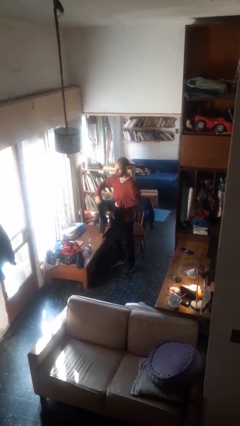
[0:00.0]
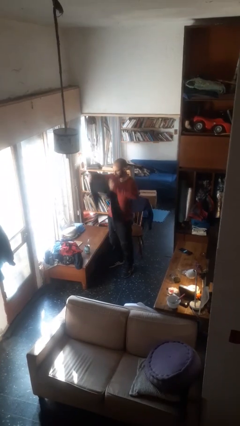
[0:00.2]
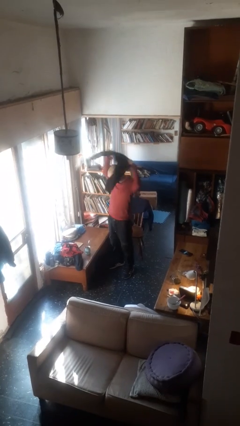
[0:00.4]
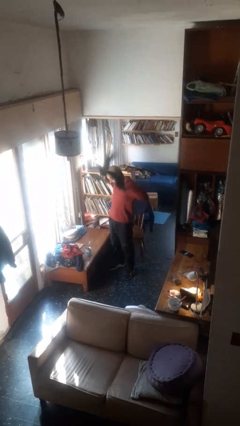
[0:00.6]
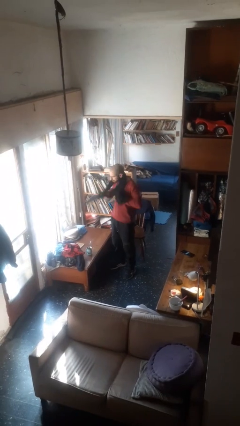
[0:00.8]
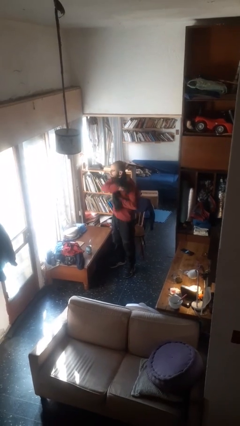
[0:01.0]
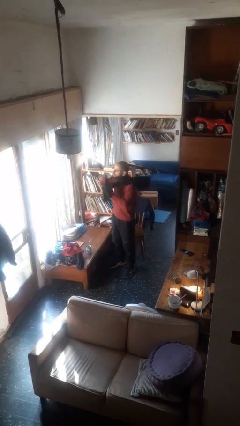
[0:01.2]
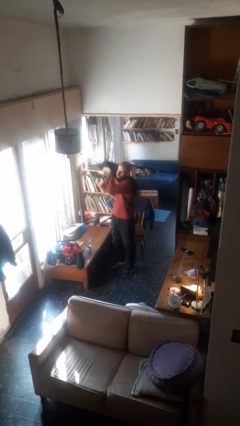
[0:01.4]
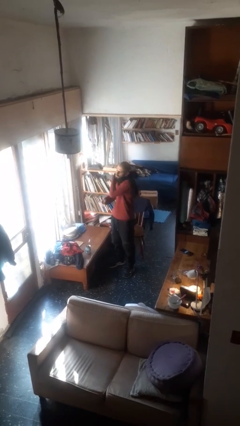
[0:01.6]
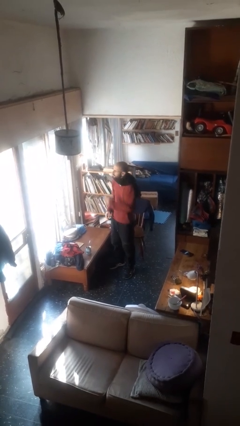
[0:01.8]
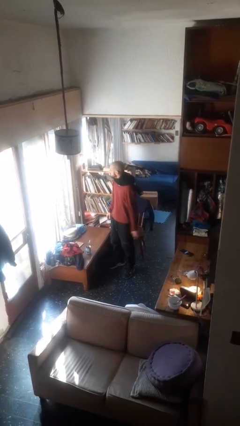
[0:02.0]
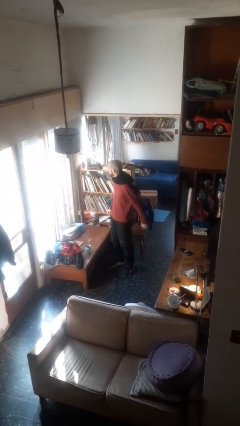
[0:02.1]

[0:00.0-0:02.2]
person puts on scarf

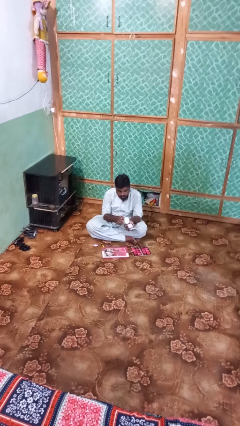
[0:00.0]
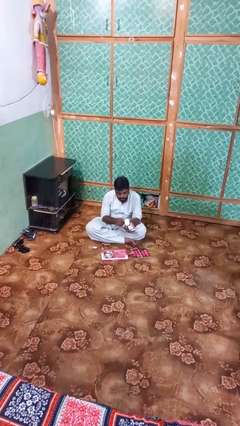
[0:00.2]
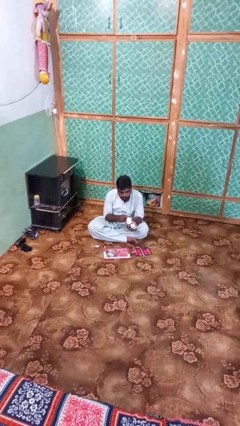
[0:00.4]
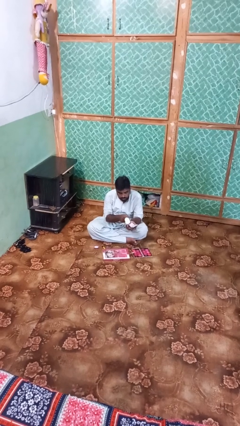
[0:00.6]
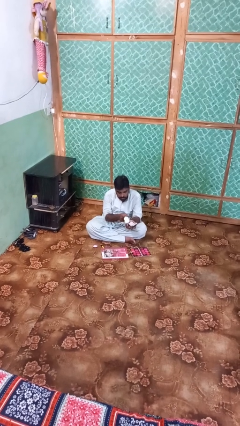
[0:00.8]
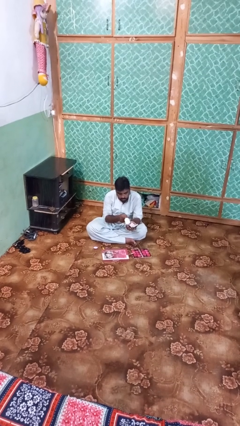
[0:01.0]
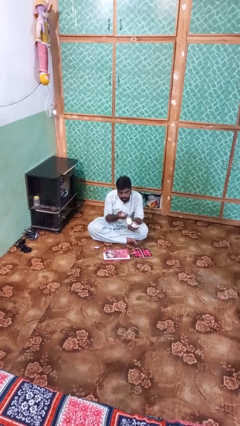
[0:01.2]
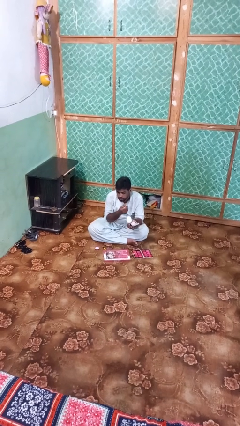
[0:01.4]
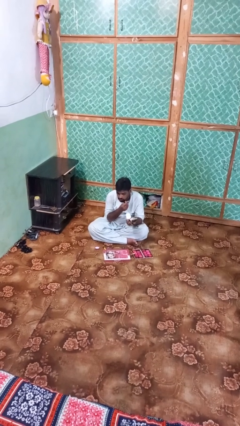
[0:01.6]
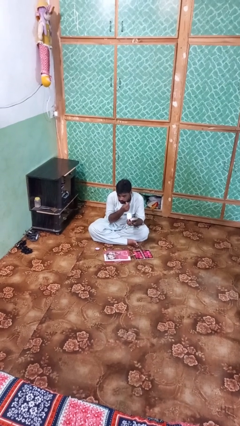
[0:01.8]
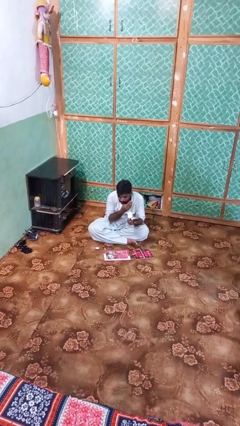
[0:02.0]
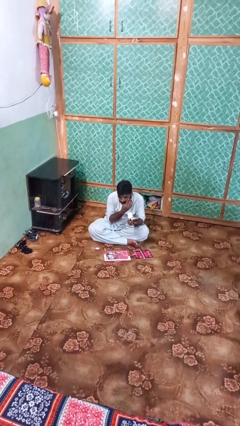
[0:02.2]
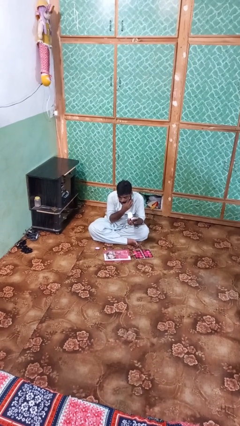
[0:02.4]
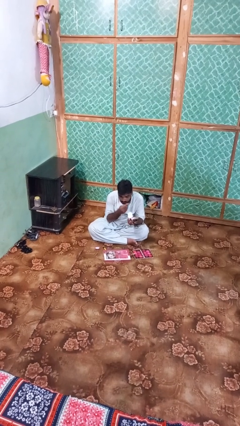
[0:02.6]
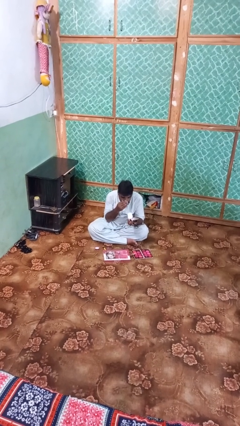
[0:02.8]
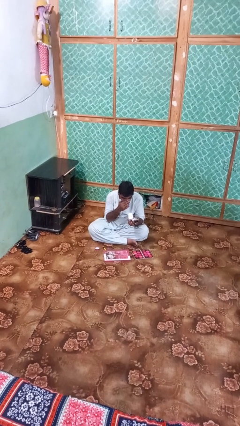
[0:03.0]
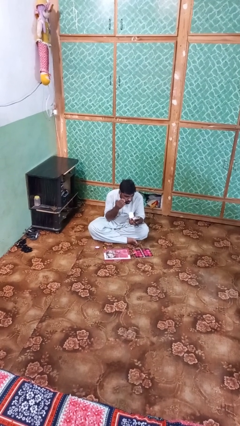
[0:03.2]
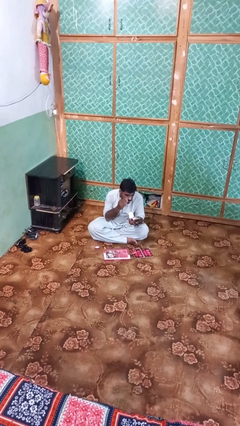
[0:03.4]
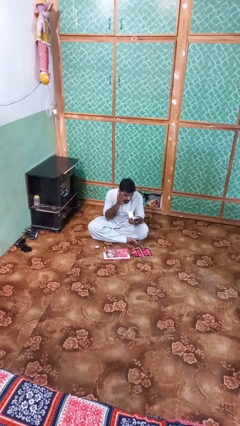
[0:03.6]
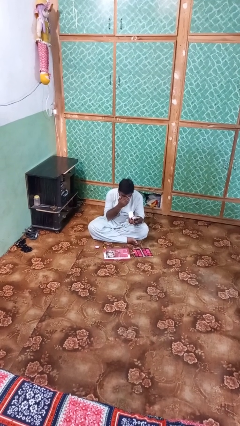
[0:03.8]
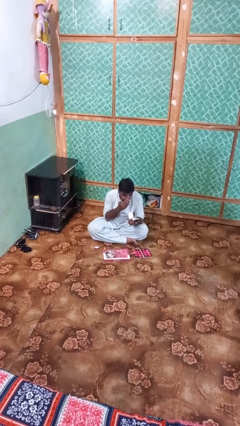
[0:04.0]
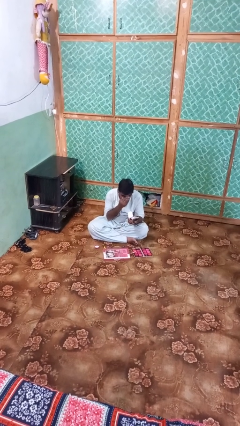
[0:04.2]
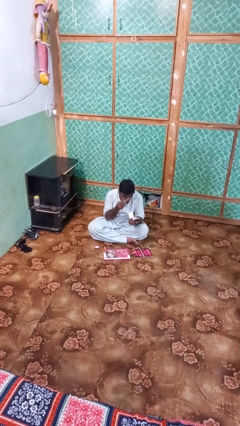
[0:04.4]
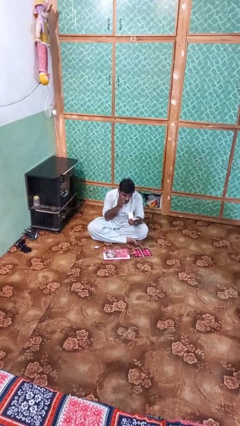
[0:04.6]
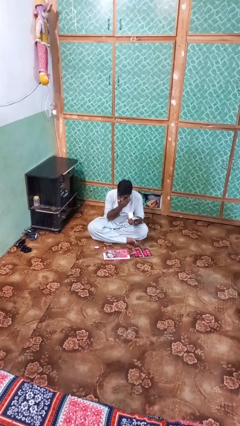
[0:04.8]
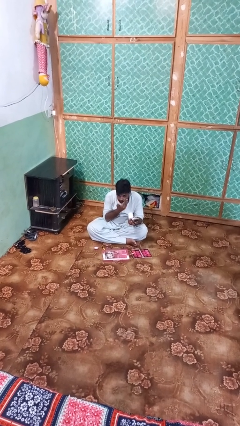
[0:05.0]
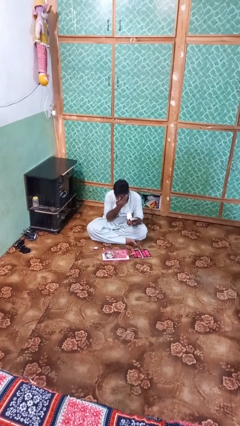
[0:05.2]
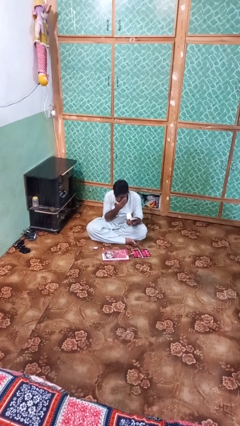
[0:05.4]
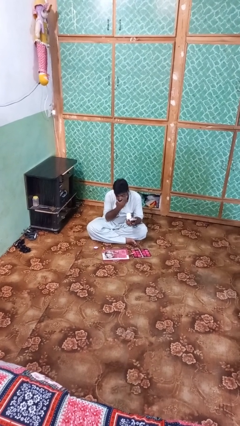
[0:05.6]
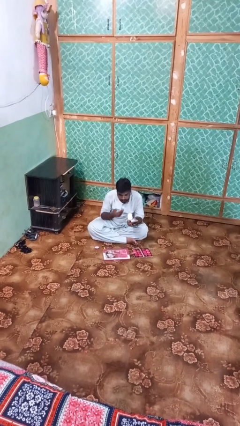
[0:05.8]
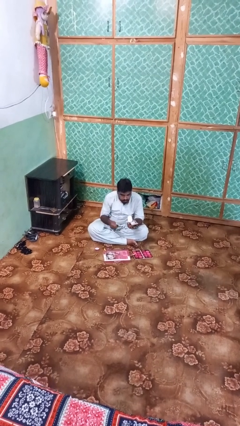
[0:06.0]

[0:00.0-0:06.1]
person applies foundation makeup

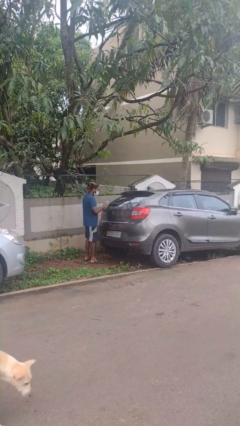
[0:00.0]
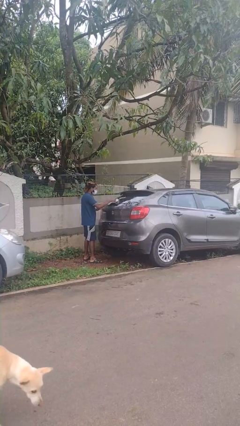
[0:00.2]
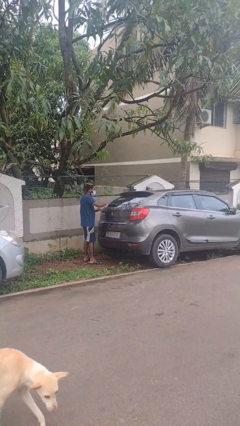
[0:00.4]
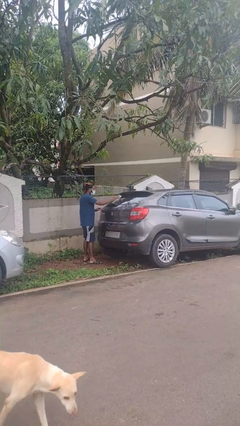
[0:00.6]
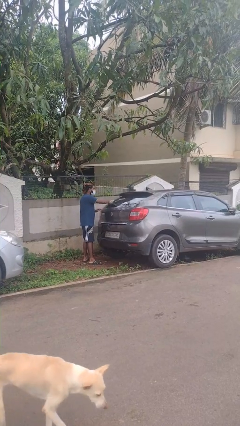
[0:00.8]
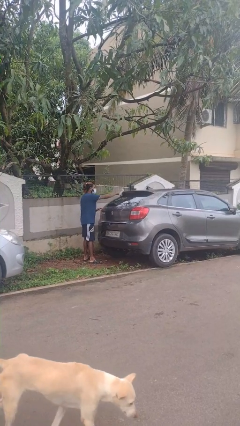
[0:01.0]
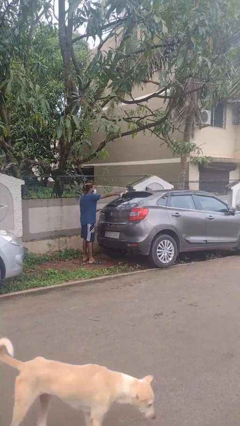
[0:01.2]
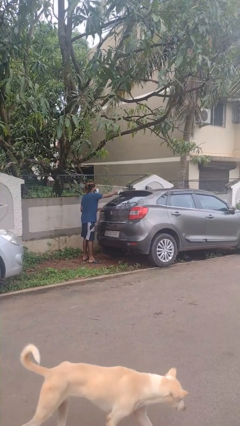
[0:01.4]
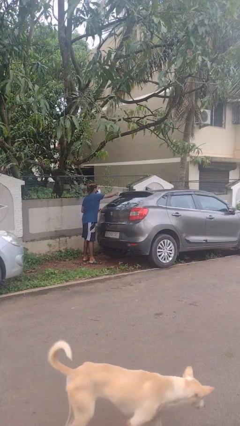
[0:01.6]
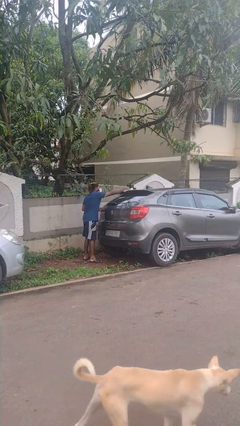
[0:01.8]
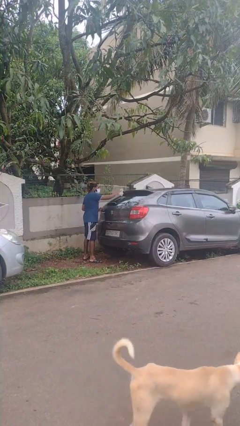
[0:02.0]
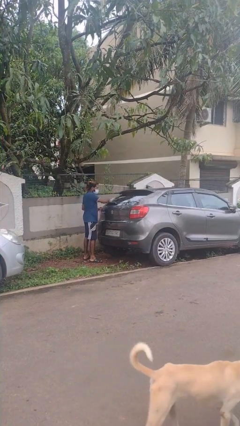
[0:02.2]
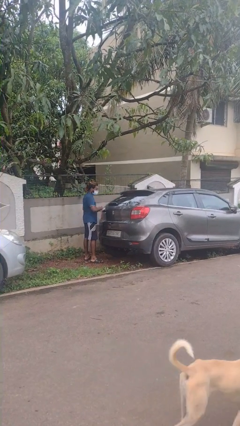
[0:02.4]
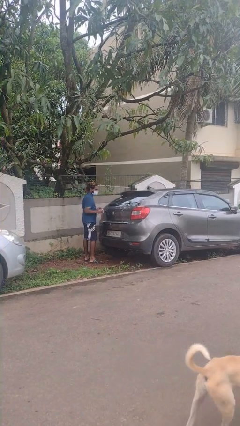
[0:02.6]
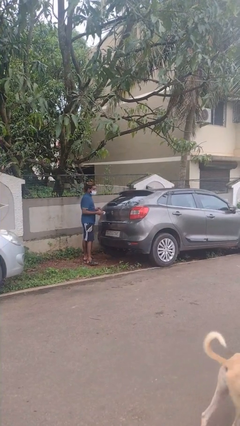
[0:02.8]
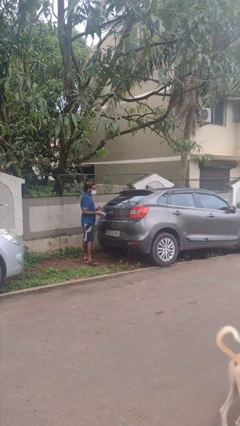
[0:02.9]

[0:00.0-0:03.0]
person polishes car with rag

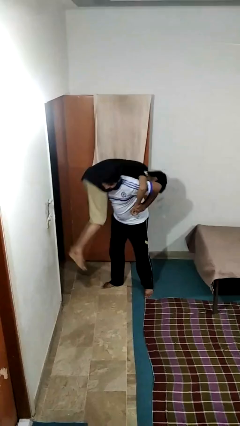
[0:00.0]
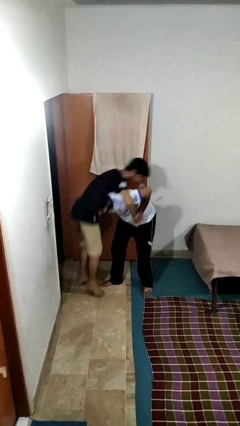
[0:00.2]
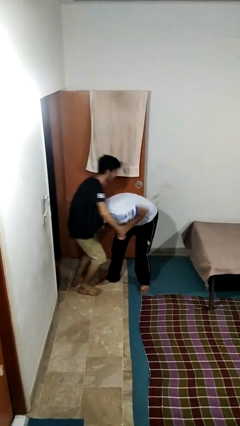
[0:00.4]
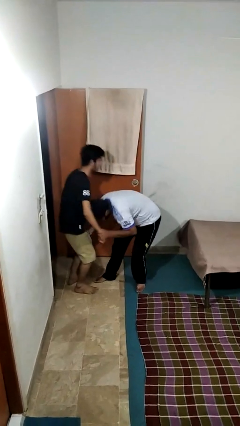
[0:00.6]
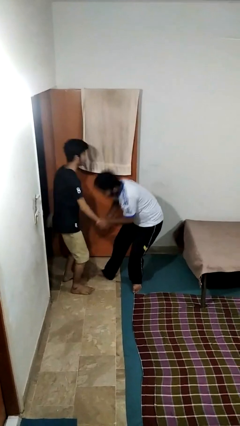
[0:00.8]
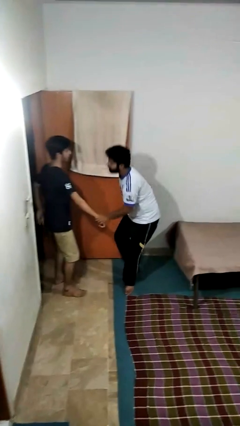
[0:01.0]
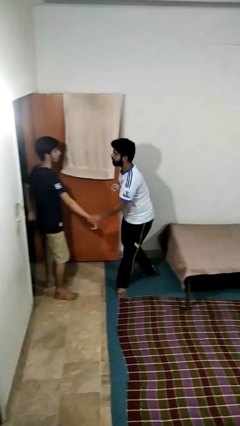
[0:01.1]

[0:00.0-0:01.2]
person puts down person

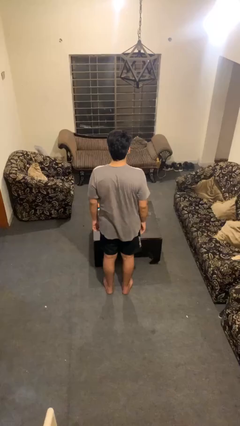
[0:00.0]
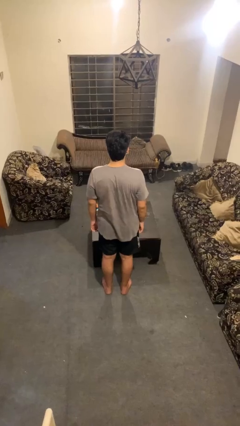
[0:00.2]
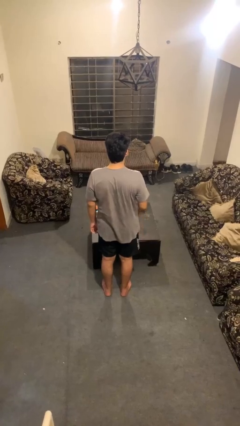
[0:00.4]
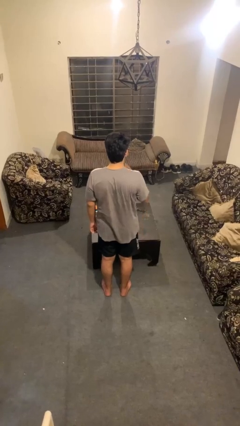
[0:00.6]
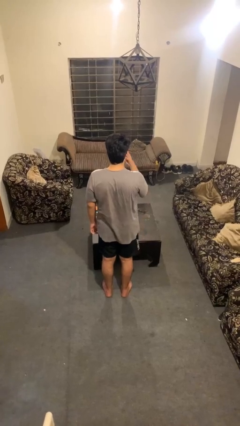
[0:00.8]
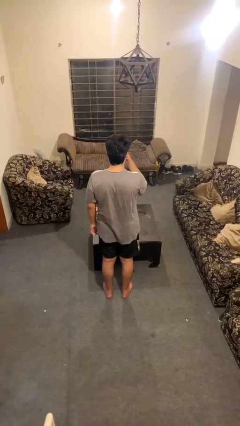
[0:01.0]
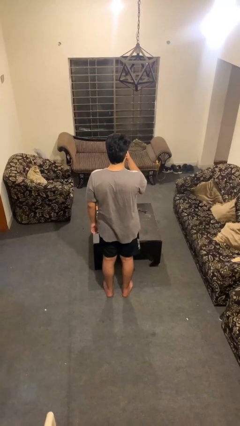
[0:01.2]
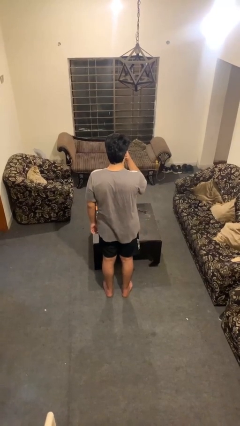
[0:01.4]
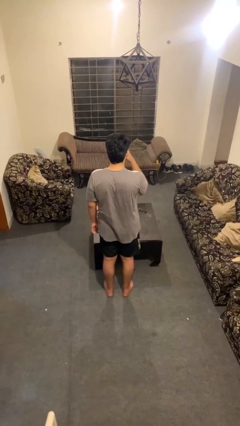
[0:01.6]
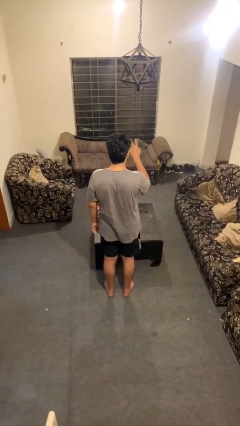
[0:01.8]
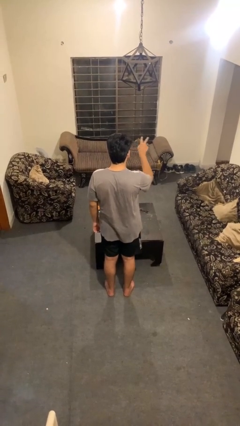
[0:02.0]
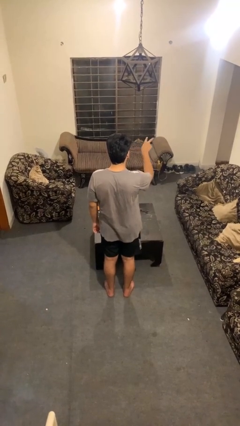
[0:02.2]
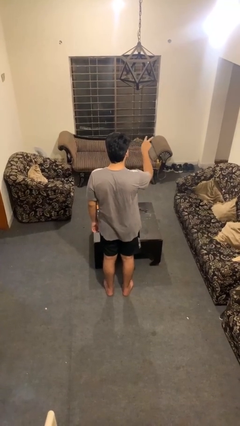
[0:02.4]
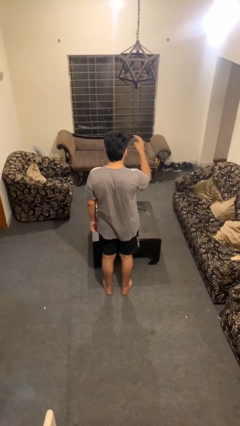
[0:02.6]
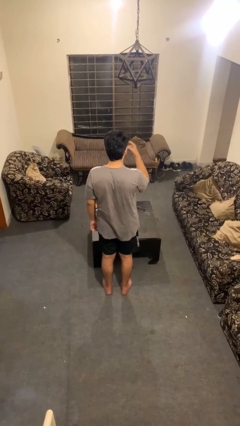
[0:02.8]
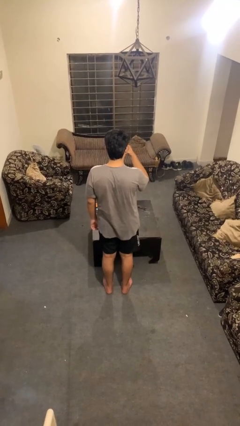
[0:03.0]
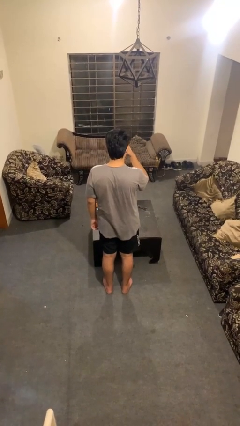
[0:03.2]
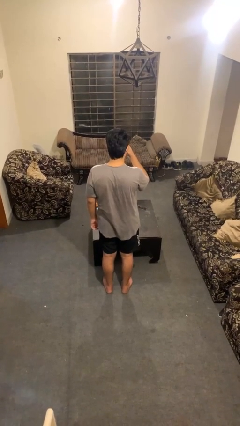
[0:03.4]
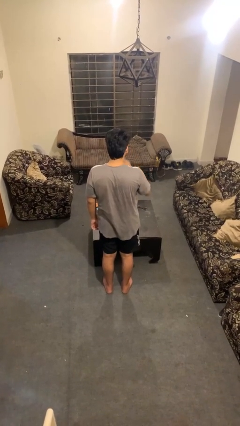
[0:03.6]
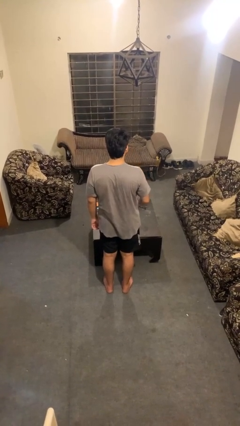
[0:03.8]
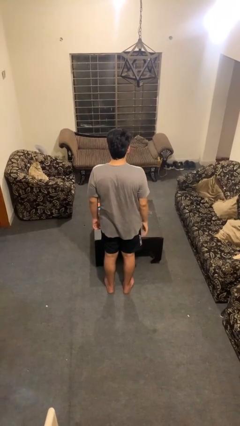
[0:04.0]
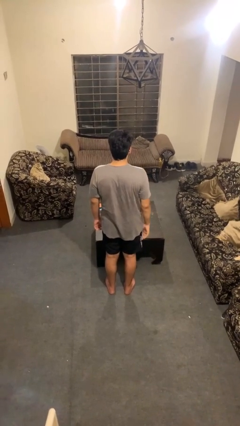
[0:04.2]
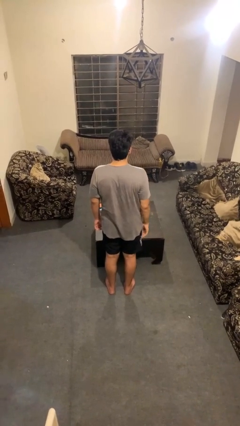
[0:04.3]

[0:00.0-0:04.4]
person gestures watch closely

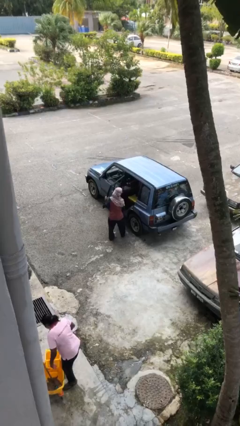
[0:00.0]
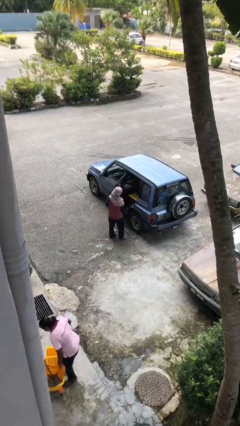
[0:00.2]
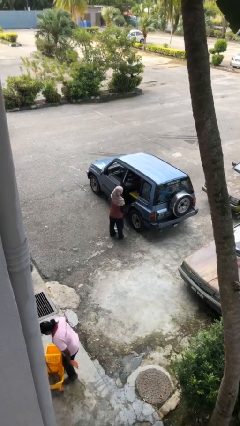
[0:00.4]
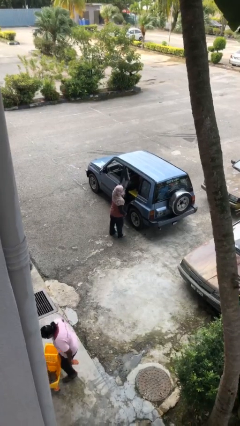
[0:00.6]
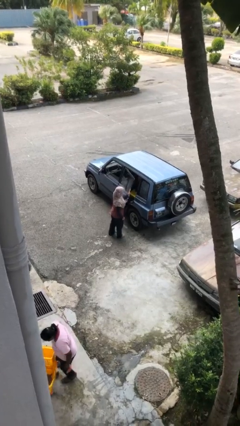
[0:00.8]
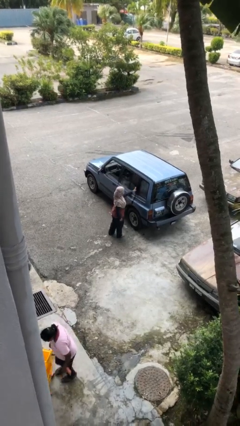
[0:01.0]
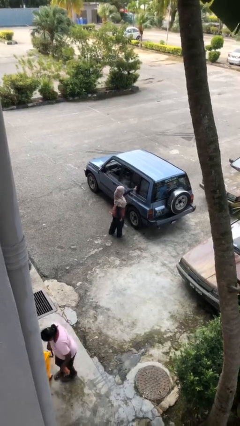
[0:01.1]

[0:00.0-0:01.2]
person closes car door
